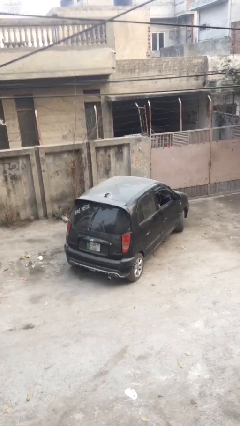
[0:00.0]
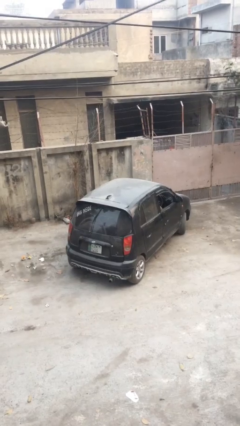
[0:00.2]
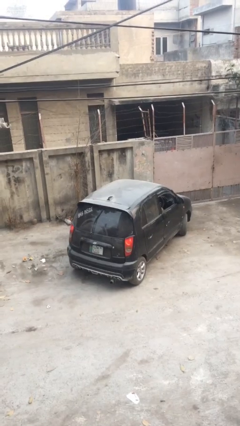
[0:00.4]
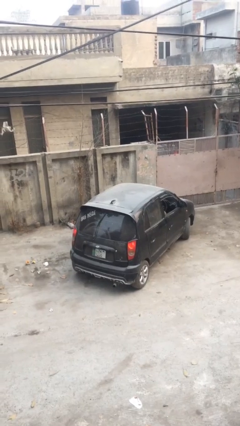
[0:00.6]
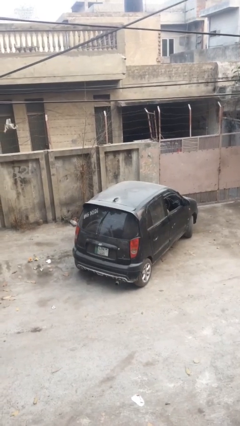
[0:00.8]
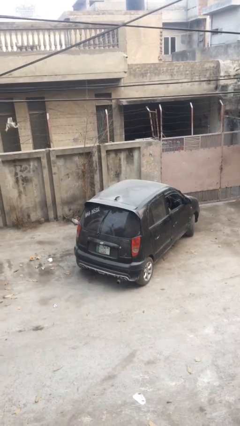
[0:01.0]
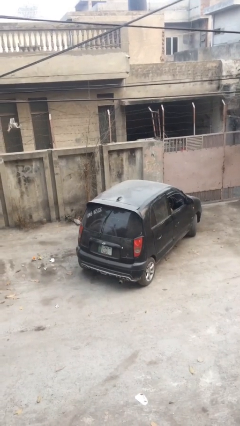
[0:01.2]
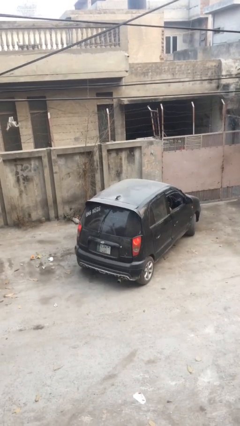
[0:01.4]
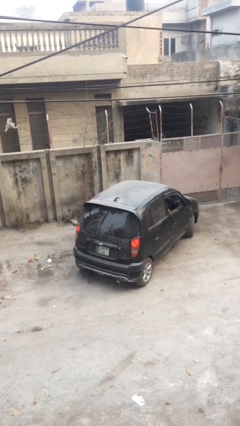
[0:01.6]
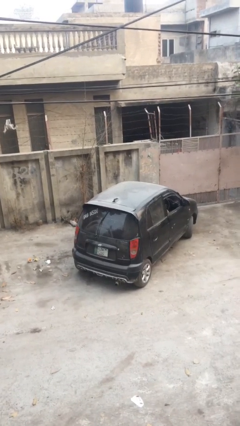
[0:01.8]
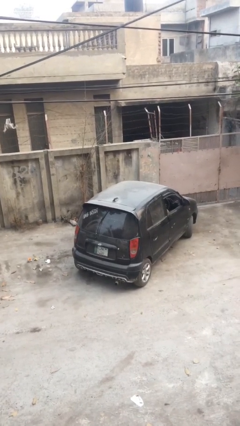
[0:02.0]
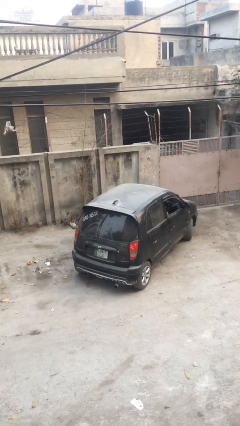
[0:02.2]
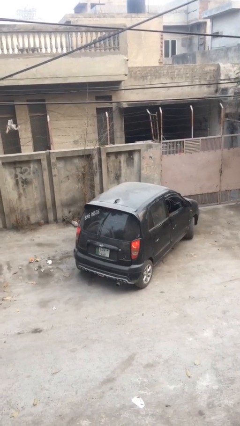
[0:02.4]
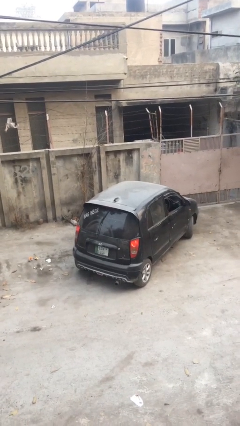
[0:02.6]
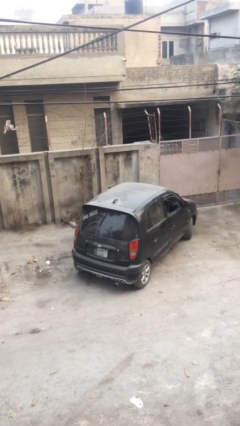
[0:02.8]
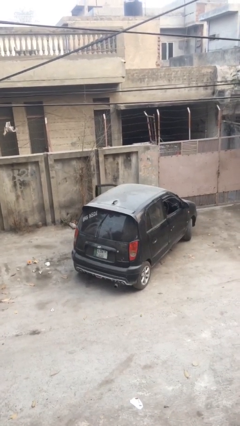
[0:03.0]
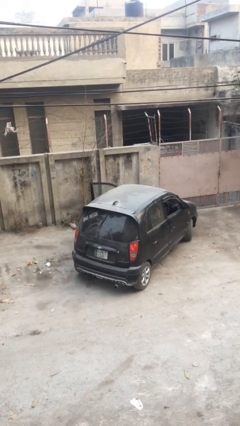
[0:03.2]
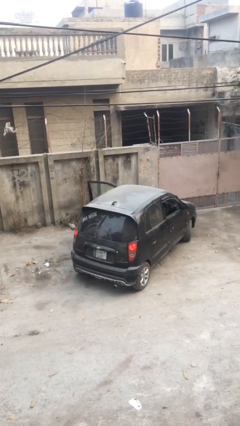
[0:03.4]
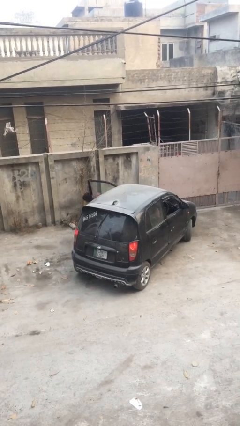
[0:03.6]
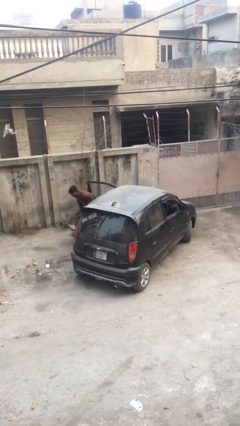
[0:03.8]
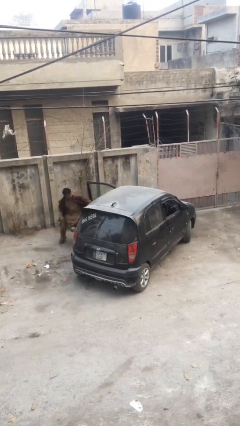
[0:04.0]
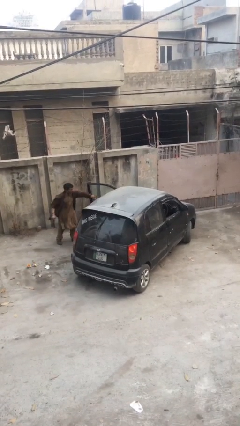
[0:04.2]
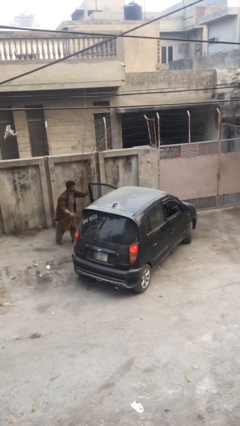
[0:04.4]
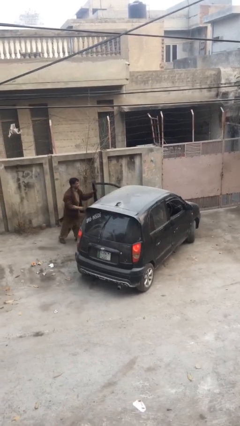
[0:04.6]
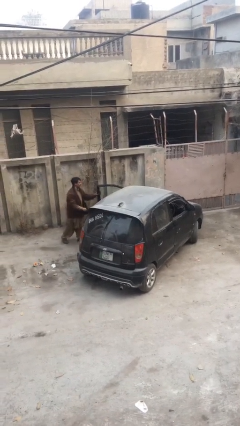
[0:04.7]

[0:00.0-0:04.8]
car drops off person

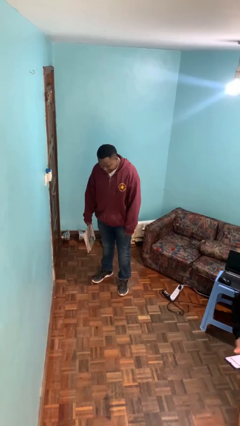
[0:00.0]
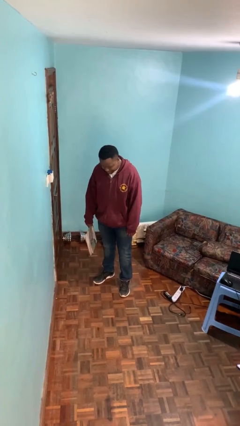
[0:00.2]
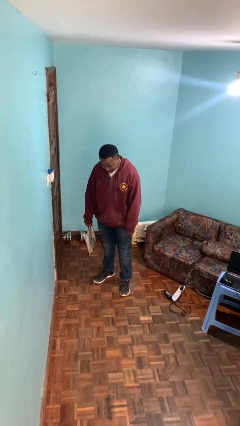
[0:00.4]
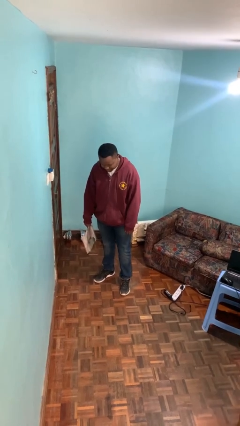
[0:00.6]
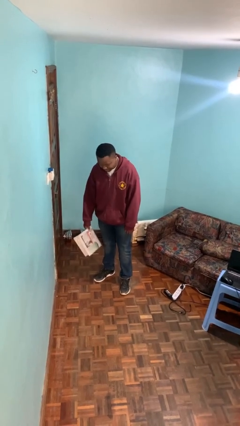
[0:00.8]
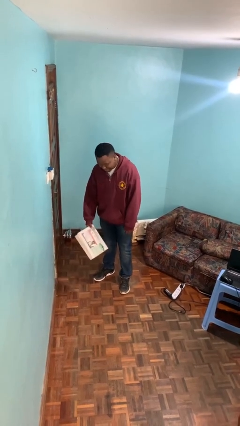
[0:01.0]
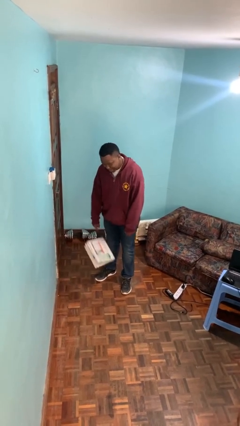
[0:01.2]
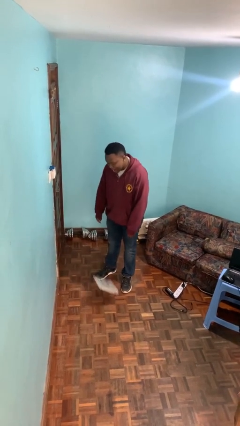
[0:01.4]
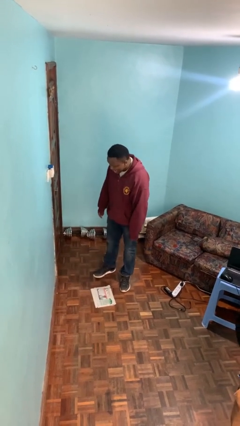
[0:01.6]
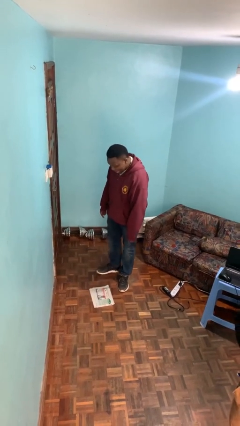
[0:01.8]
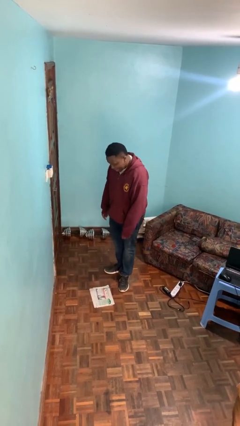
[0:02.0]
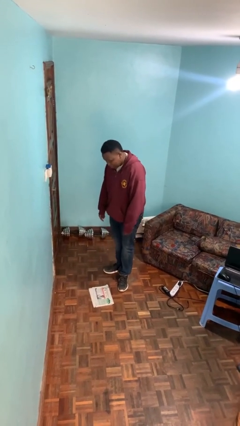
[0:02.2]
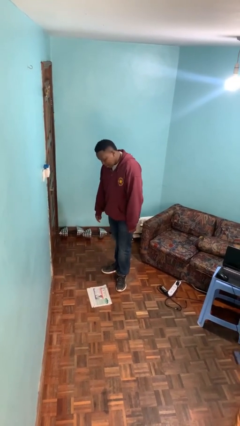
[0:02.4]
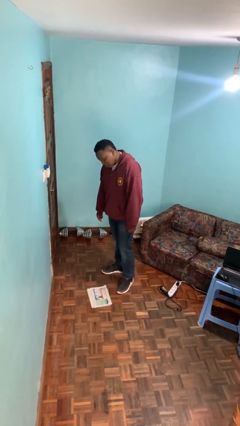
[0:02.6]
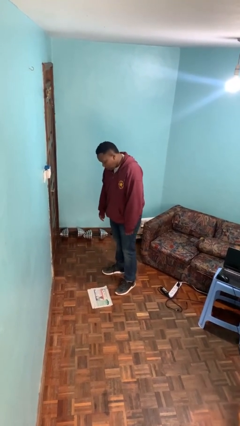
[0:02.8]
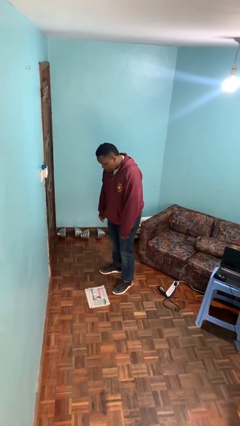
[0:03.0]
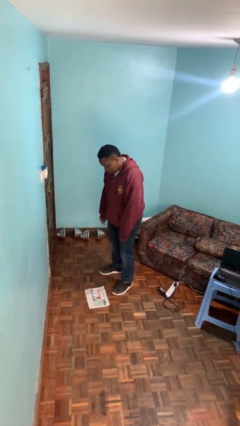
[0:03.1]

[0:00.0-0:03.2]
person drops object

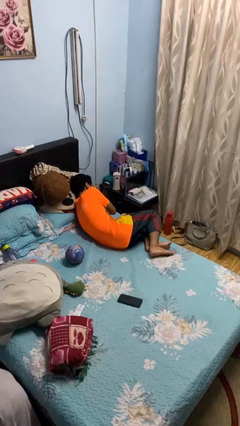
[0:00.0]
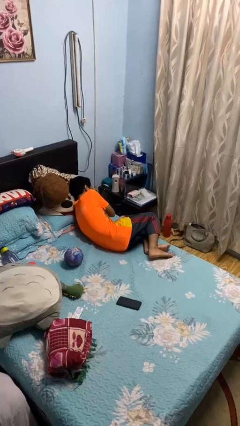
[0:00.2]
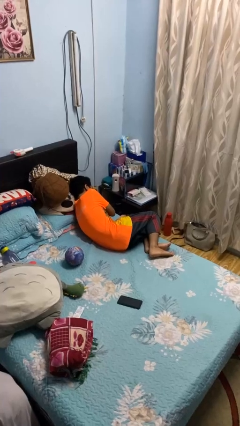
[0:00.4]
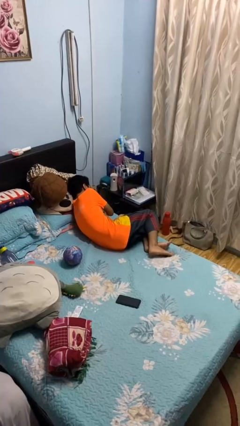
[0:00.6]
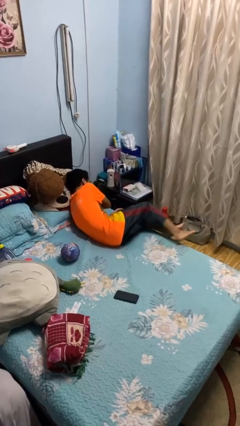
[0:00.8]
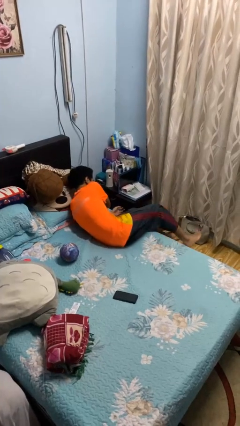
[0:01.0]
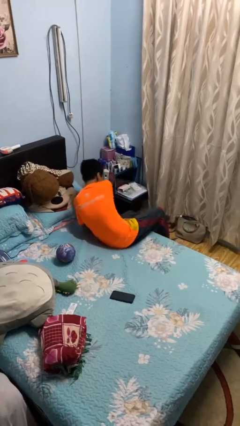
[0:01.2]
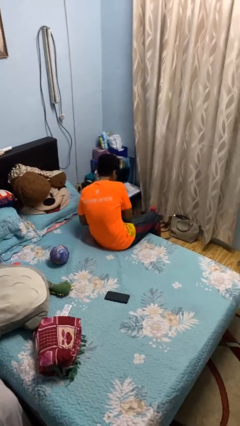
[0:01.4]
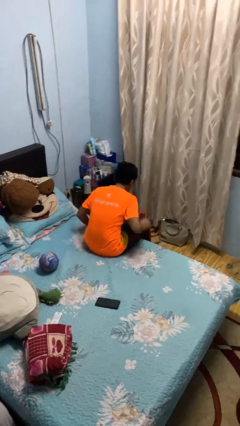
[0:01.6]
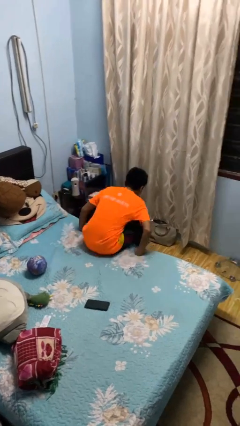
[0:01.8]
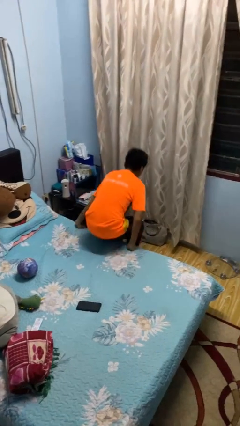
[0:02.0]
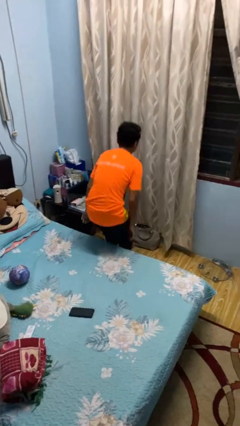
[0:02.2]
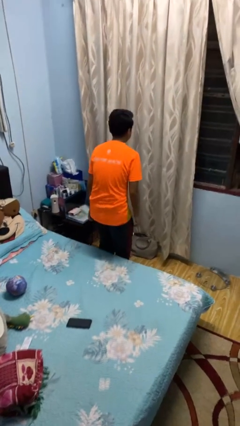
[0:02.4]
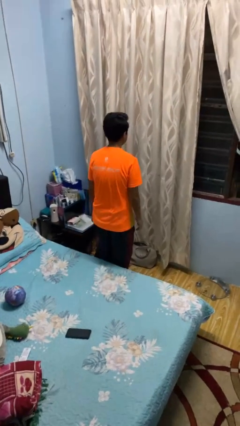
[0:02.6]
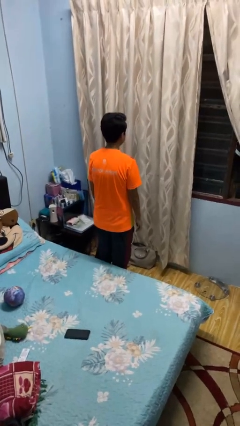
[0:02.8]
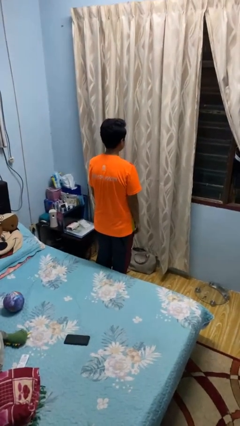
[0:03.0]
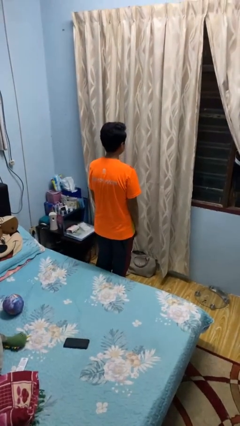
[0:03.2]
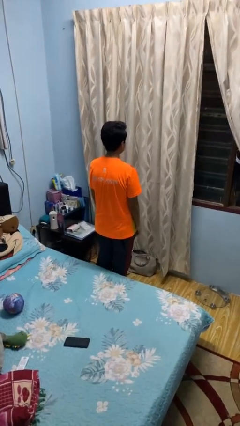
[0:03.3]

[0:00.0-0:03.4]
person stands up

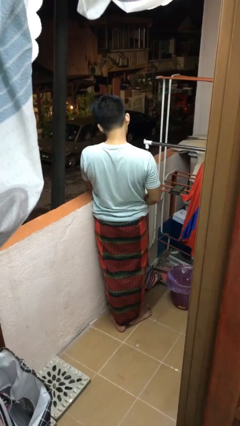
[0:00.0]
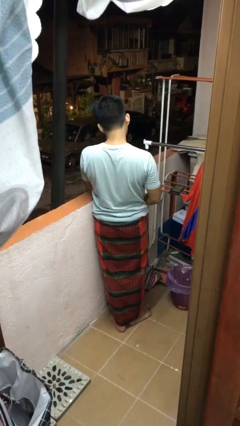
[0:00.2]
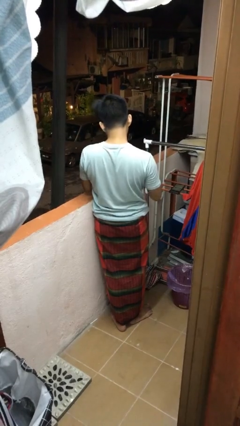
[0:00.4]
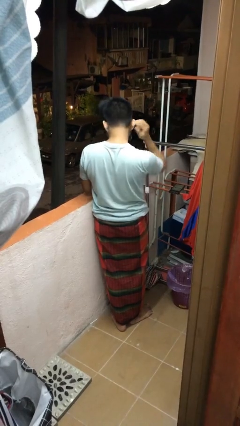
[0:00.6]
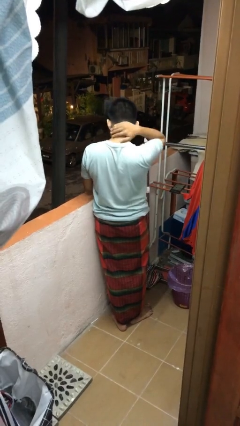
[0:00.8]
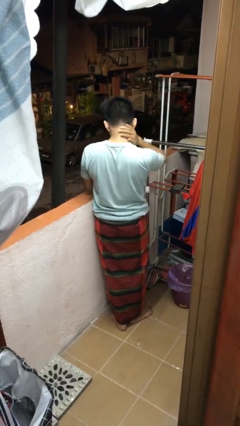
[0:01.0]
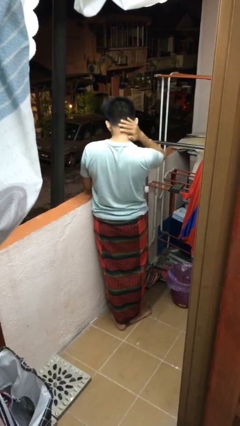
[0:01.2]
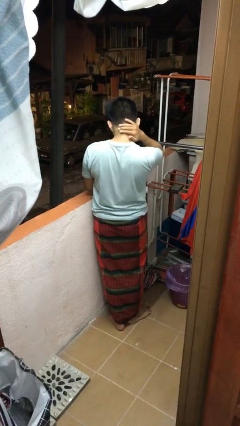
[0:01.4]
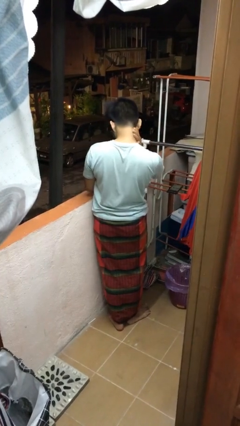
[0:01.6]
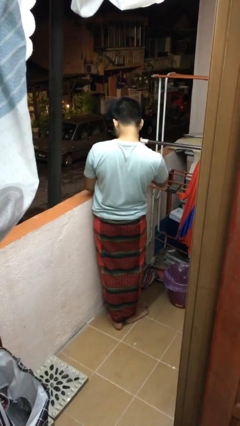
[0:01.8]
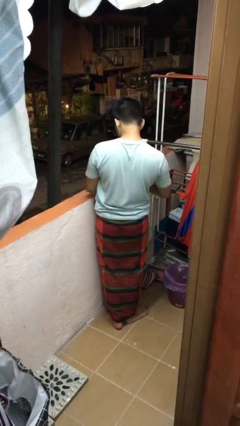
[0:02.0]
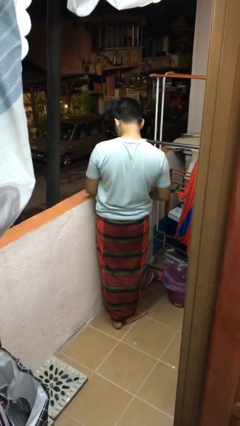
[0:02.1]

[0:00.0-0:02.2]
person rubs neck

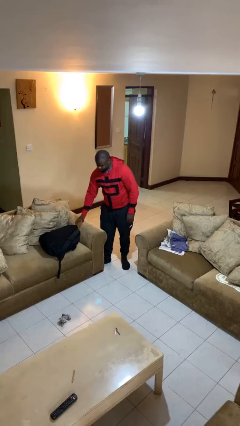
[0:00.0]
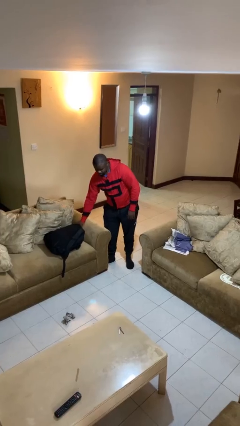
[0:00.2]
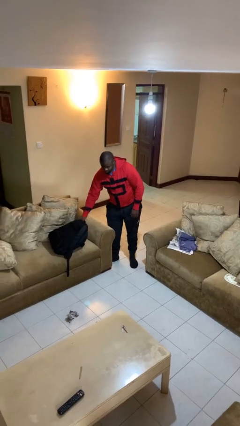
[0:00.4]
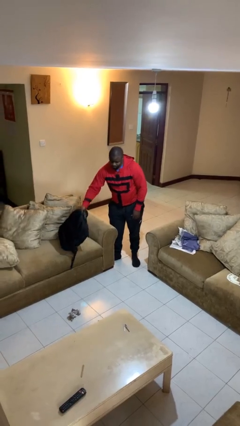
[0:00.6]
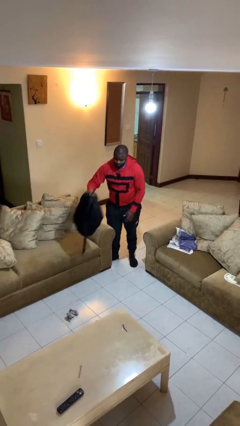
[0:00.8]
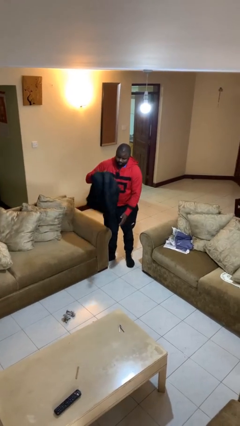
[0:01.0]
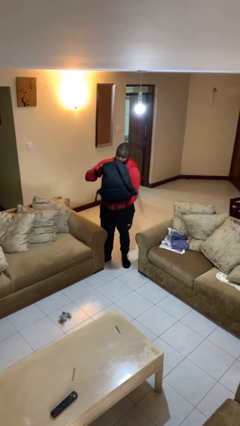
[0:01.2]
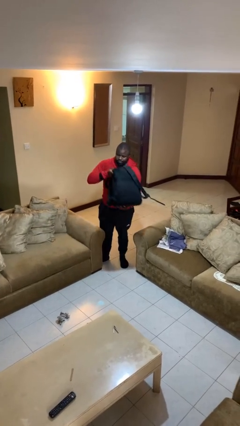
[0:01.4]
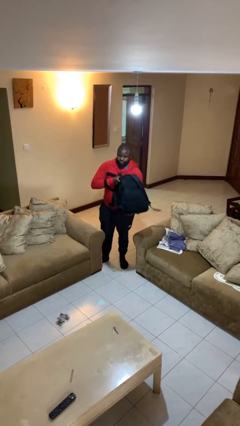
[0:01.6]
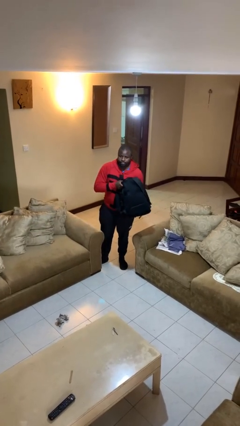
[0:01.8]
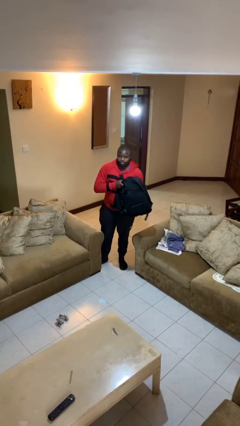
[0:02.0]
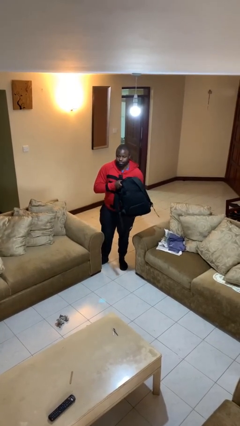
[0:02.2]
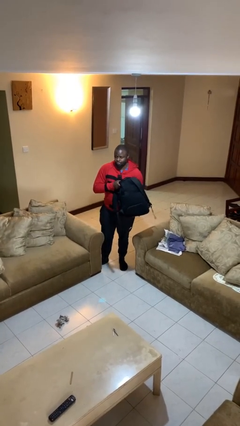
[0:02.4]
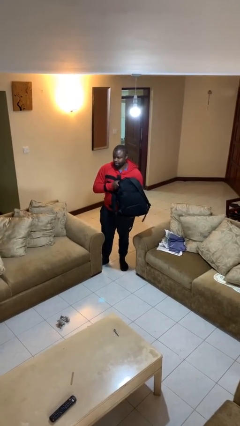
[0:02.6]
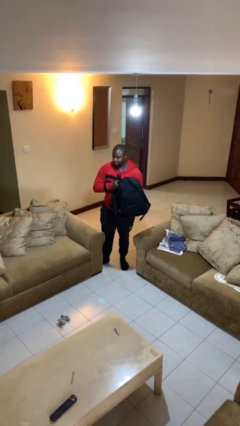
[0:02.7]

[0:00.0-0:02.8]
person picks up object from couch

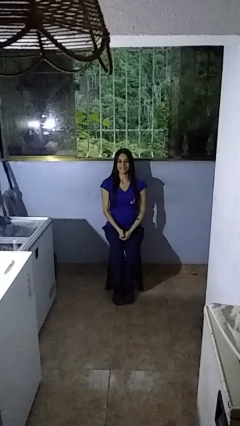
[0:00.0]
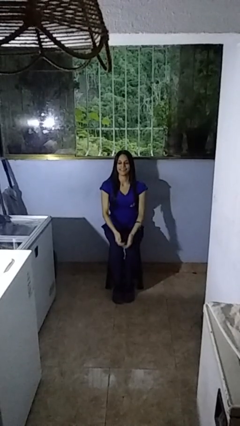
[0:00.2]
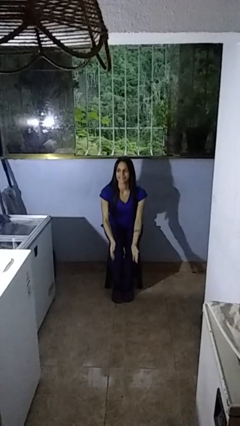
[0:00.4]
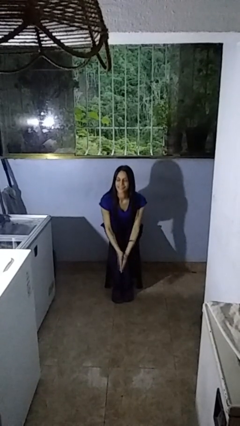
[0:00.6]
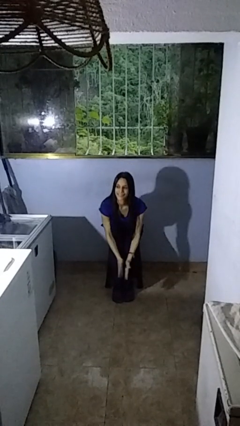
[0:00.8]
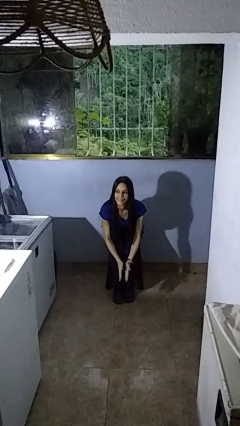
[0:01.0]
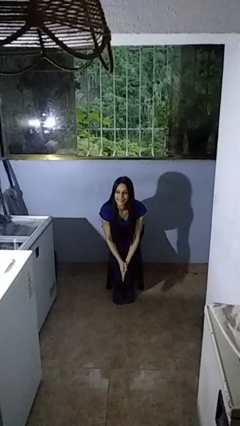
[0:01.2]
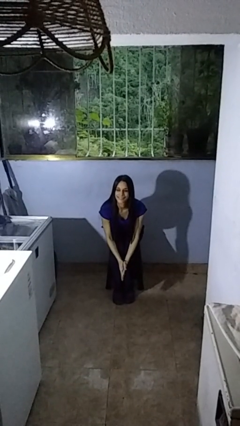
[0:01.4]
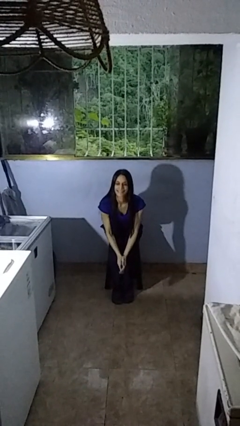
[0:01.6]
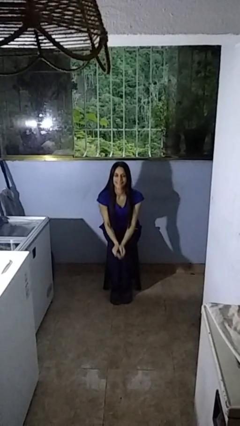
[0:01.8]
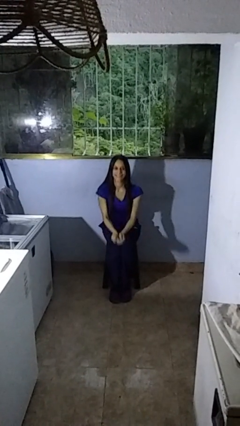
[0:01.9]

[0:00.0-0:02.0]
person claps hands
